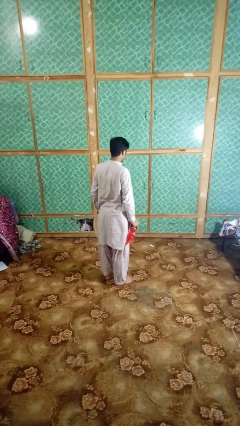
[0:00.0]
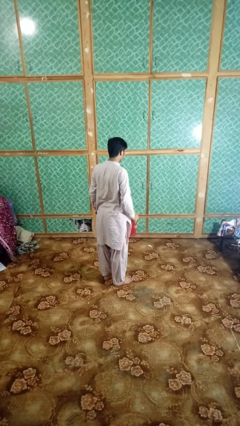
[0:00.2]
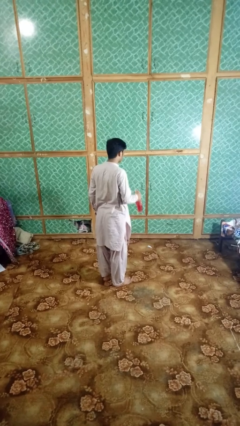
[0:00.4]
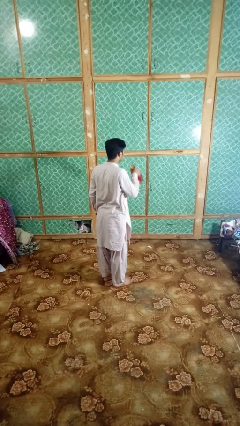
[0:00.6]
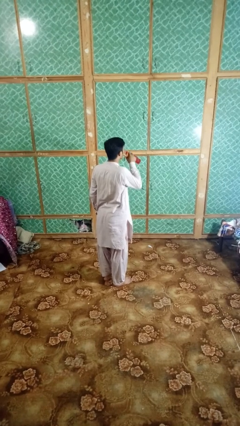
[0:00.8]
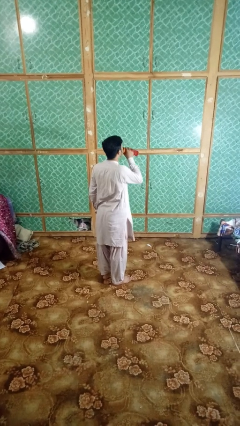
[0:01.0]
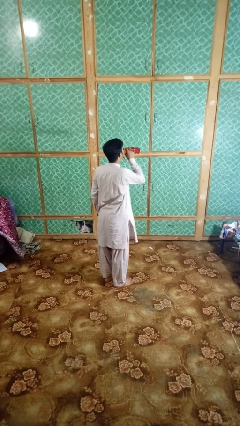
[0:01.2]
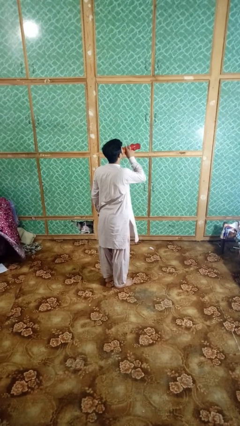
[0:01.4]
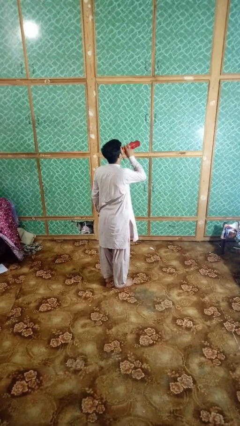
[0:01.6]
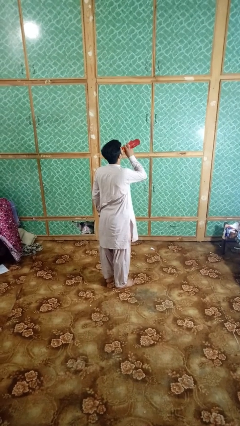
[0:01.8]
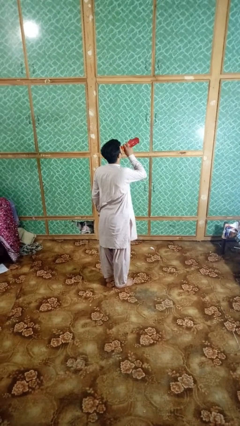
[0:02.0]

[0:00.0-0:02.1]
person drinks from bottle

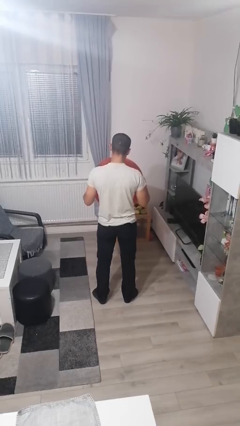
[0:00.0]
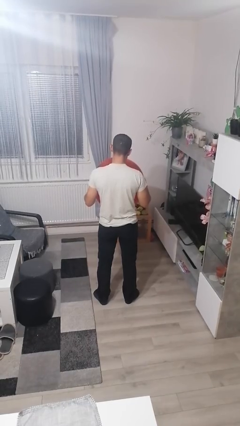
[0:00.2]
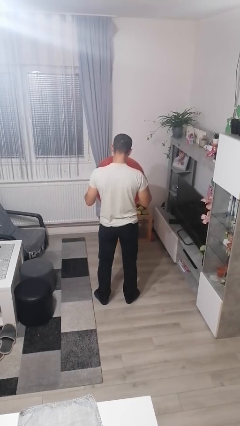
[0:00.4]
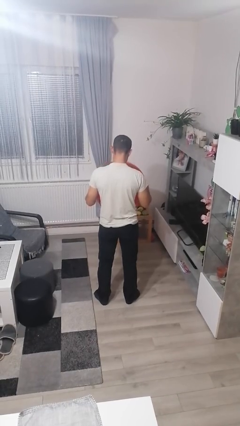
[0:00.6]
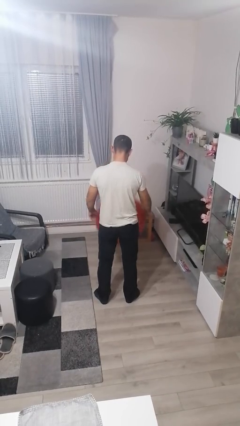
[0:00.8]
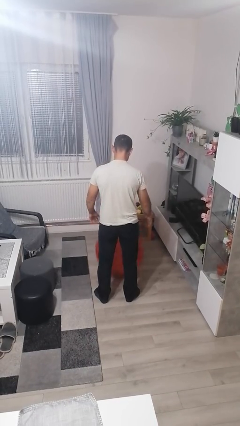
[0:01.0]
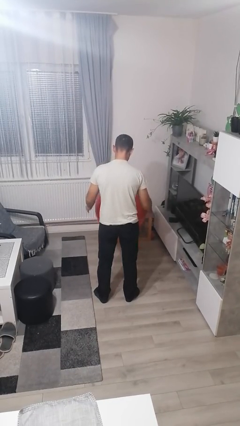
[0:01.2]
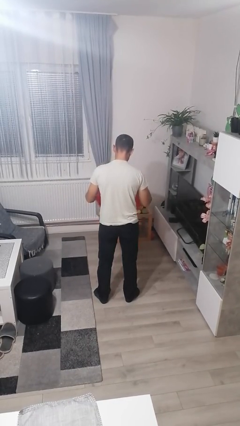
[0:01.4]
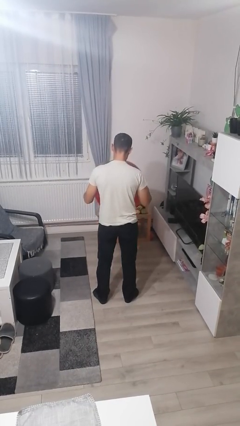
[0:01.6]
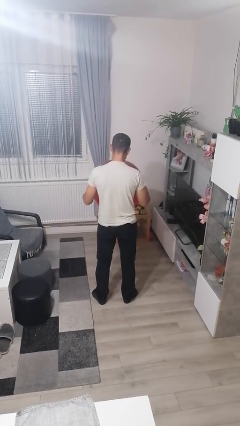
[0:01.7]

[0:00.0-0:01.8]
person bounces ball on floor

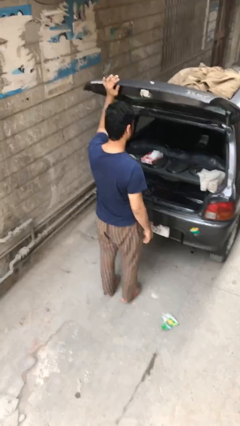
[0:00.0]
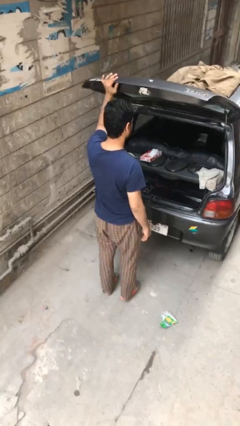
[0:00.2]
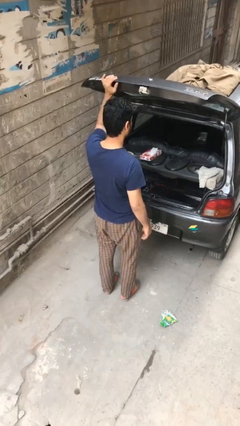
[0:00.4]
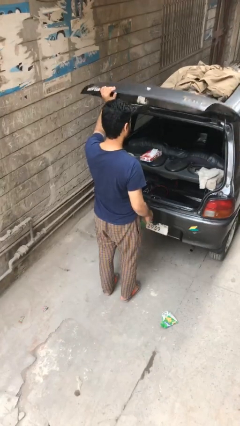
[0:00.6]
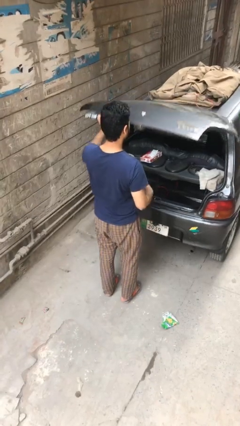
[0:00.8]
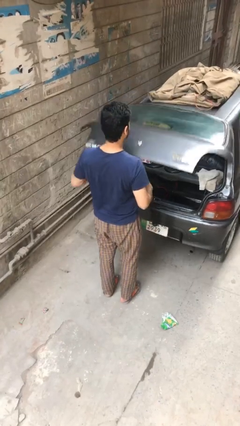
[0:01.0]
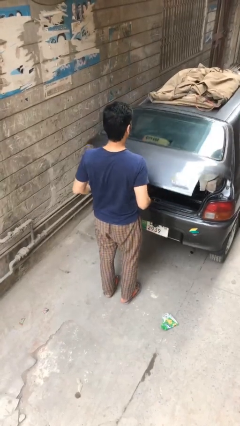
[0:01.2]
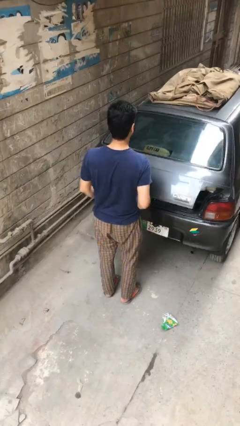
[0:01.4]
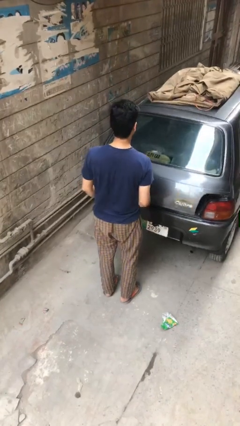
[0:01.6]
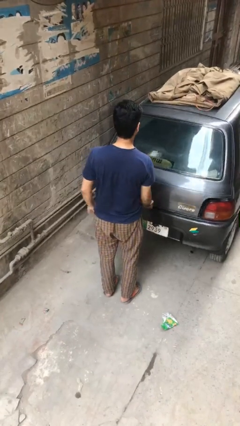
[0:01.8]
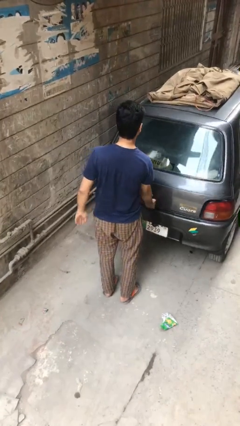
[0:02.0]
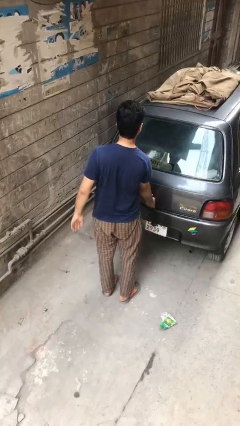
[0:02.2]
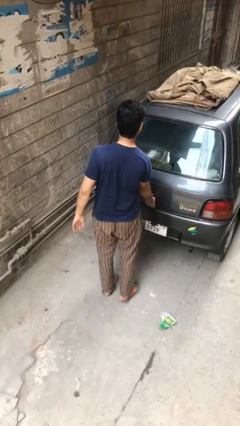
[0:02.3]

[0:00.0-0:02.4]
person closes car trunk

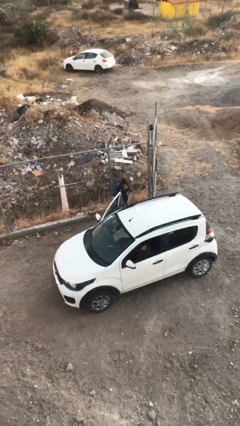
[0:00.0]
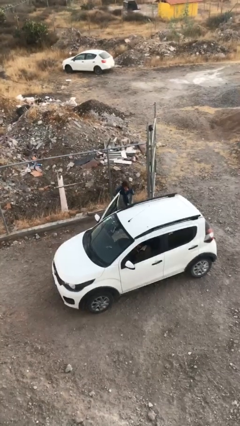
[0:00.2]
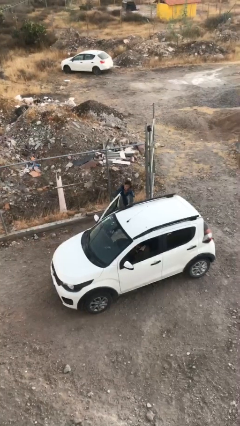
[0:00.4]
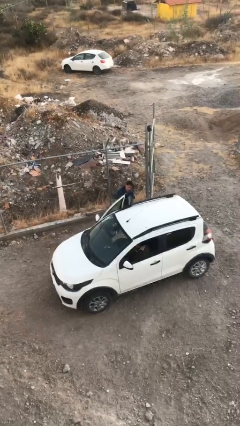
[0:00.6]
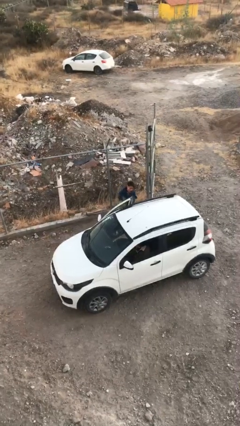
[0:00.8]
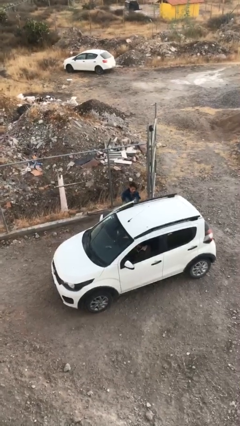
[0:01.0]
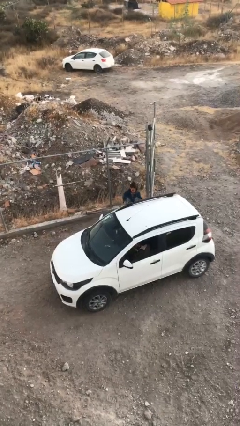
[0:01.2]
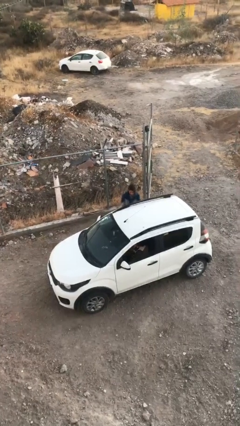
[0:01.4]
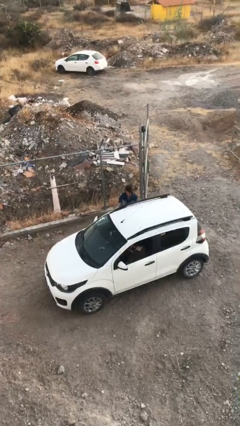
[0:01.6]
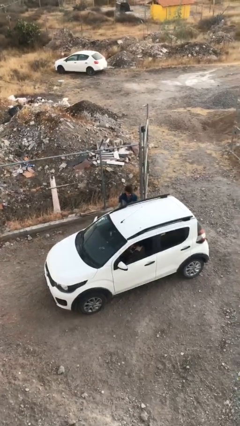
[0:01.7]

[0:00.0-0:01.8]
person closes car door

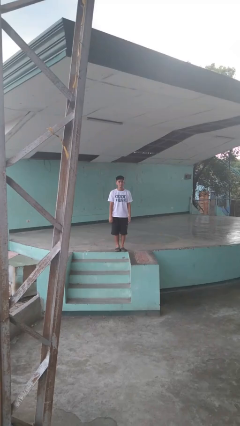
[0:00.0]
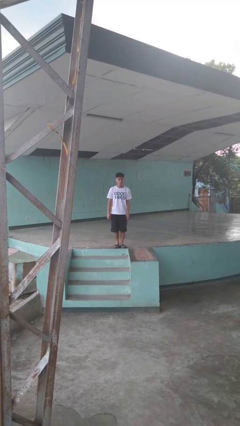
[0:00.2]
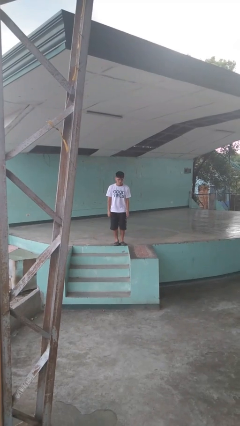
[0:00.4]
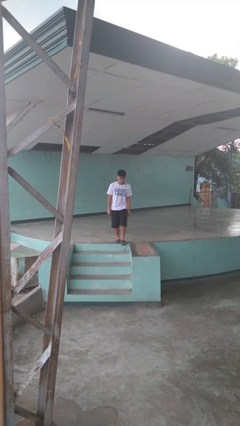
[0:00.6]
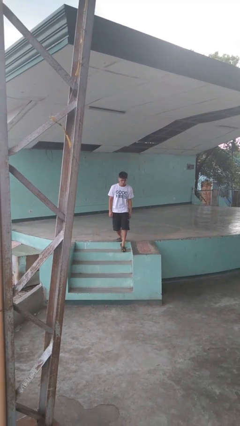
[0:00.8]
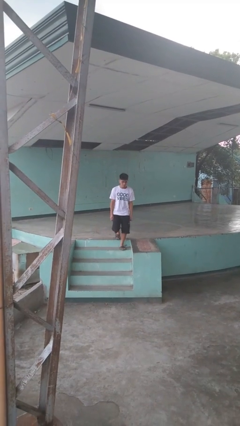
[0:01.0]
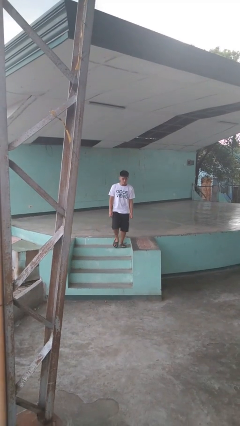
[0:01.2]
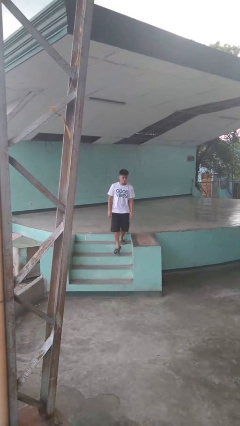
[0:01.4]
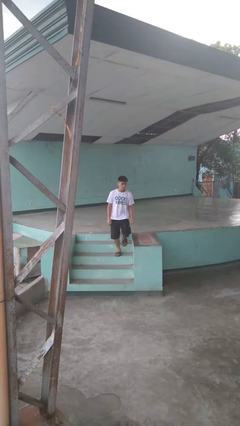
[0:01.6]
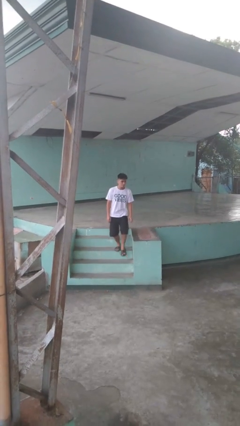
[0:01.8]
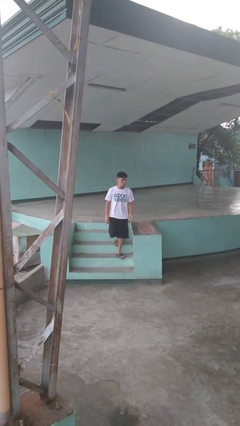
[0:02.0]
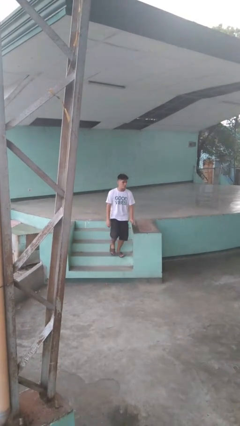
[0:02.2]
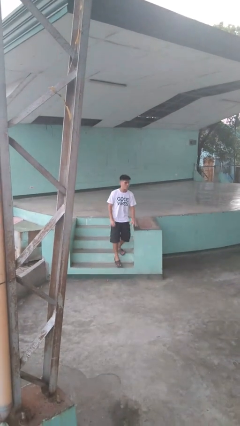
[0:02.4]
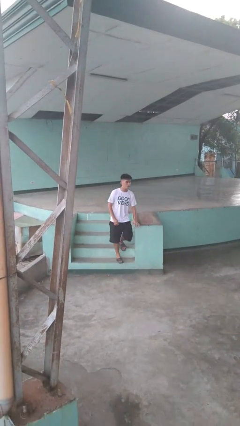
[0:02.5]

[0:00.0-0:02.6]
person climbs down stairs

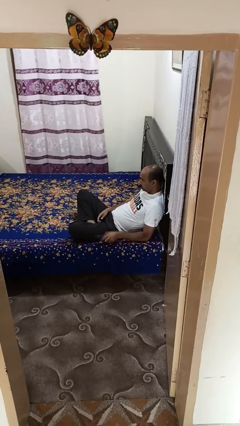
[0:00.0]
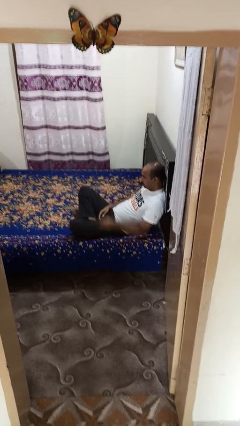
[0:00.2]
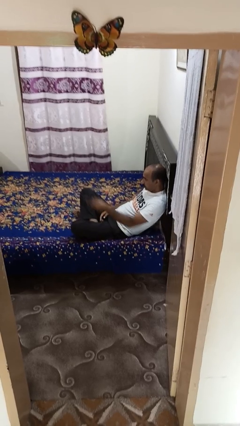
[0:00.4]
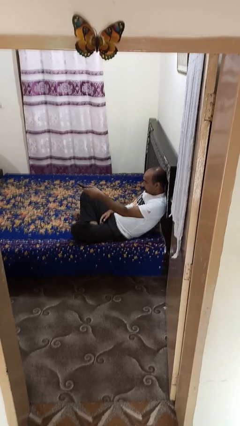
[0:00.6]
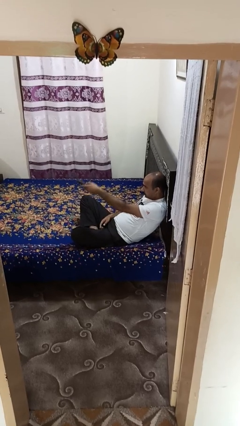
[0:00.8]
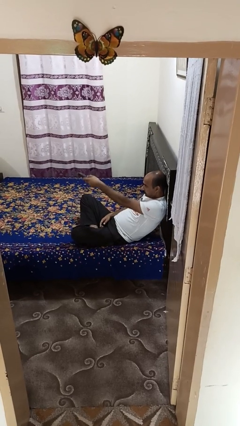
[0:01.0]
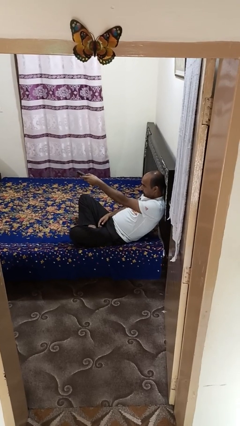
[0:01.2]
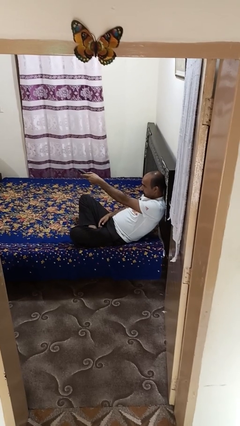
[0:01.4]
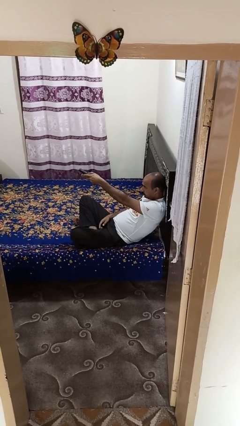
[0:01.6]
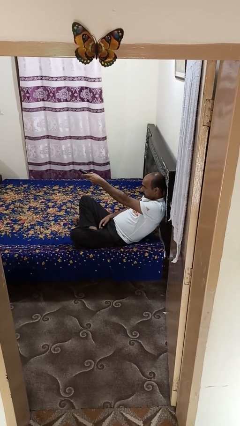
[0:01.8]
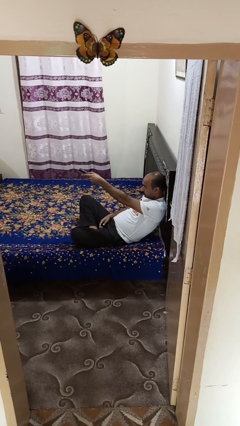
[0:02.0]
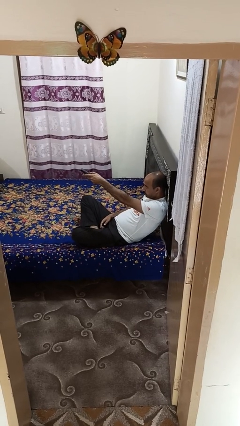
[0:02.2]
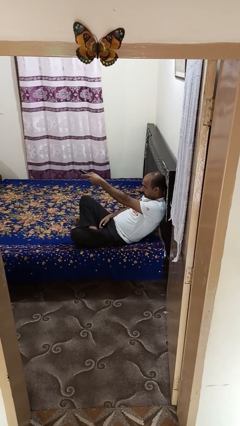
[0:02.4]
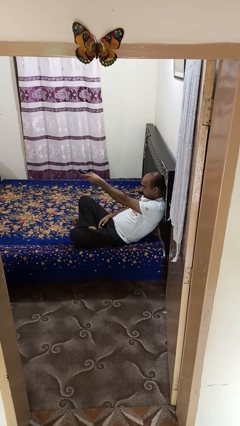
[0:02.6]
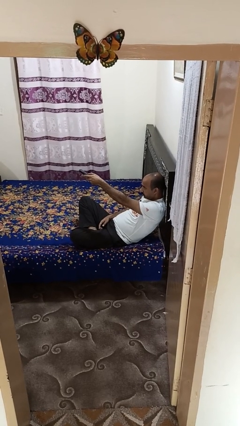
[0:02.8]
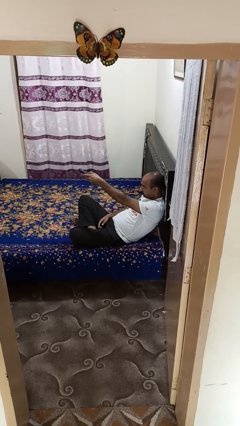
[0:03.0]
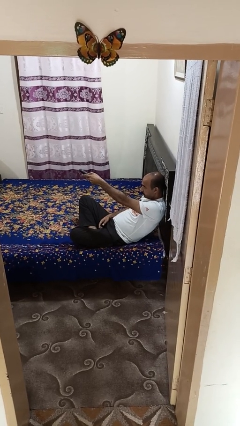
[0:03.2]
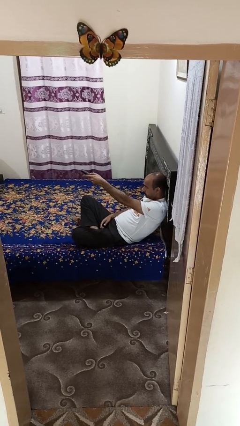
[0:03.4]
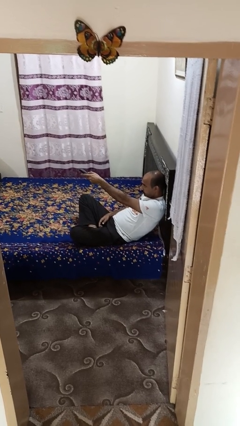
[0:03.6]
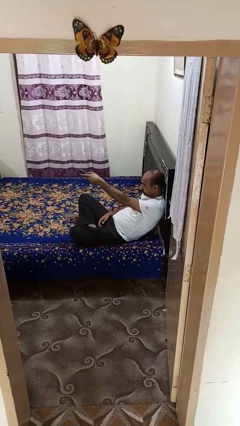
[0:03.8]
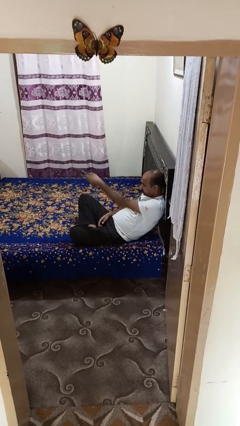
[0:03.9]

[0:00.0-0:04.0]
person uses television remote

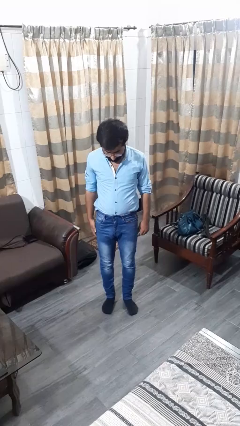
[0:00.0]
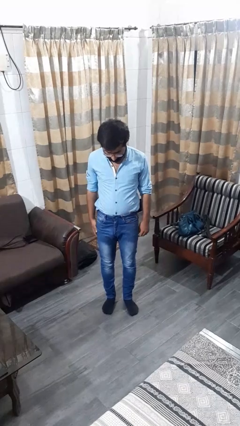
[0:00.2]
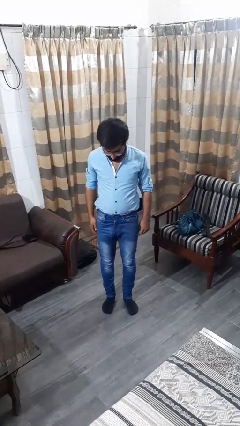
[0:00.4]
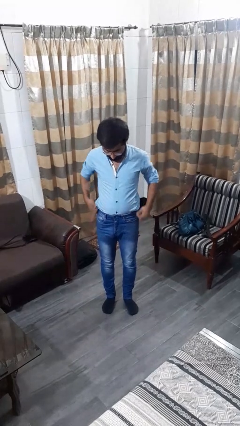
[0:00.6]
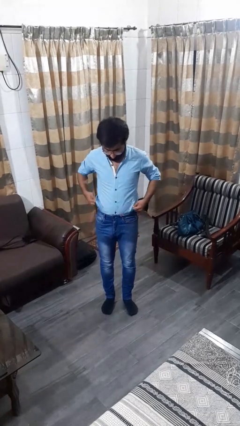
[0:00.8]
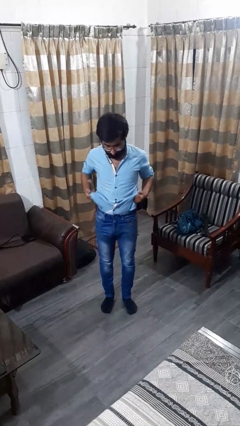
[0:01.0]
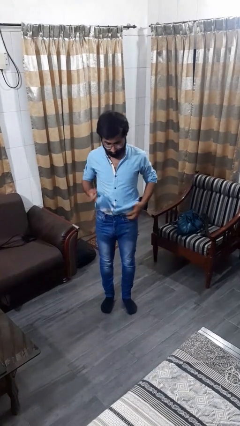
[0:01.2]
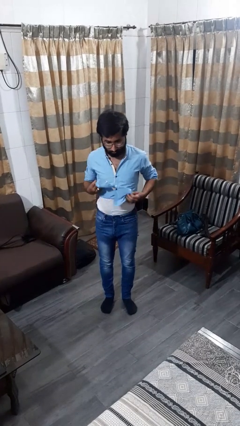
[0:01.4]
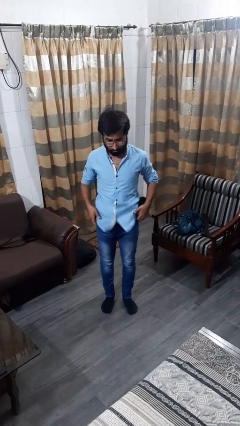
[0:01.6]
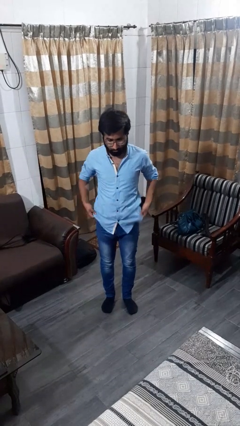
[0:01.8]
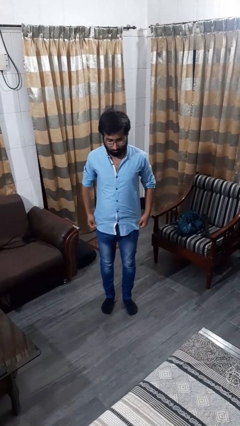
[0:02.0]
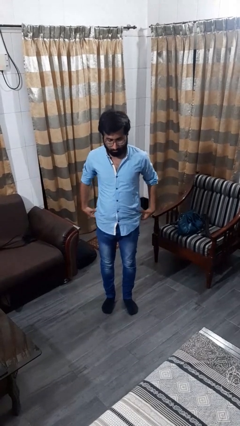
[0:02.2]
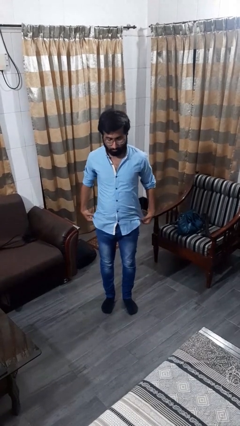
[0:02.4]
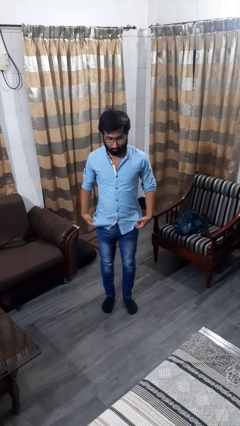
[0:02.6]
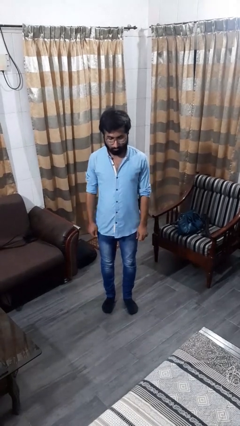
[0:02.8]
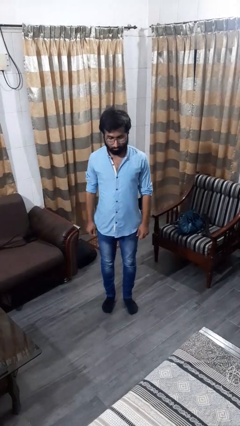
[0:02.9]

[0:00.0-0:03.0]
person untucks shirt
